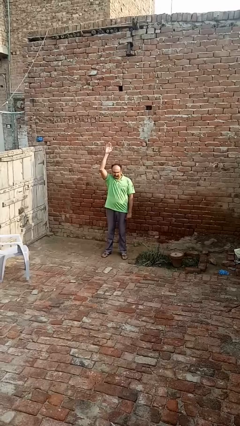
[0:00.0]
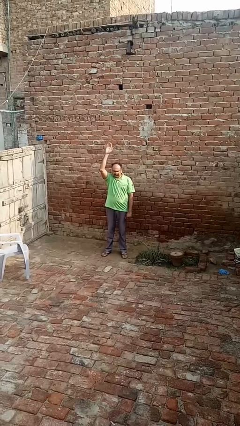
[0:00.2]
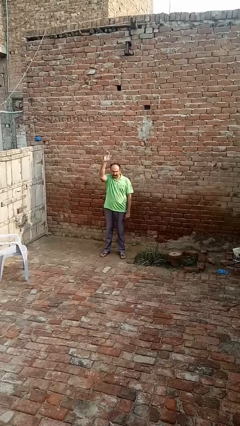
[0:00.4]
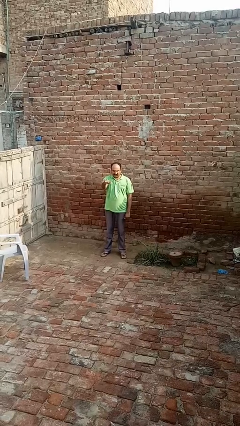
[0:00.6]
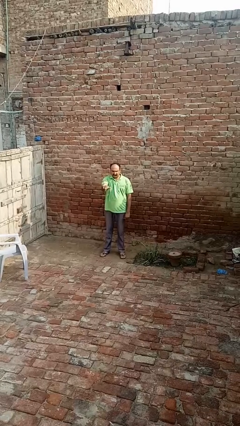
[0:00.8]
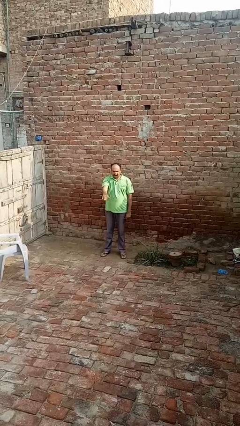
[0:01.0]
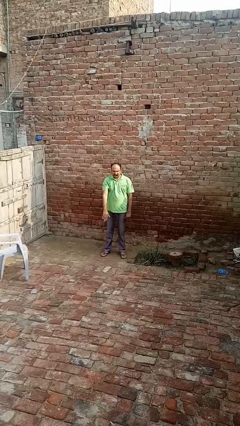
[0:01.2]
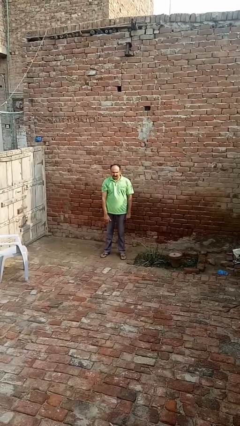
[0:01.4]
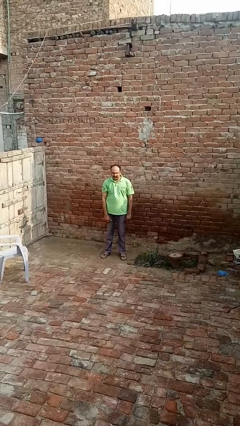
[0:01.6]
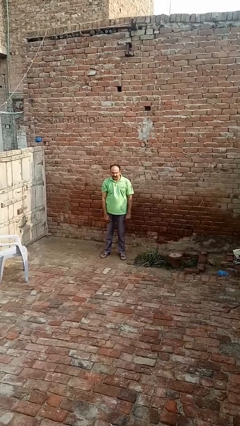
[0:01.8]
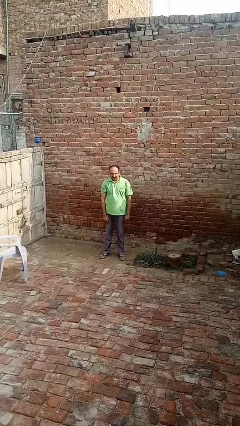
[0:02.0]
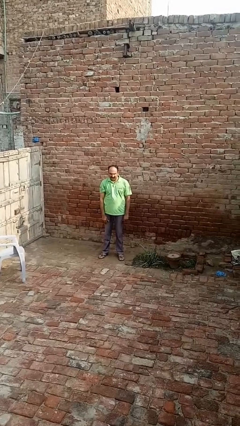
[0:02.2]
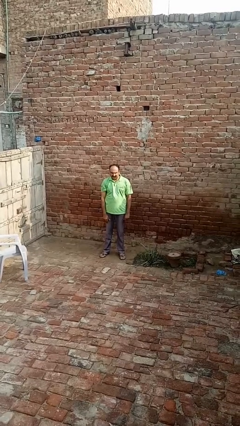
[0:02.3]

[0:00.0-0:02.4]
person gestures swipe down

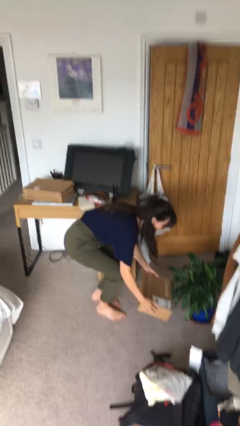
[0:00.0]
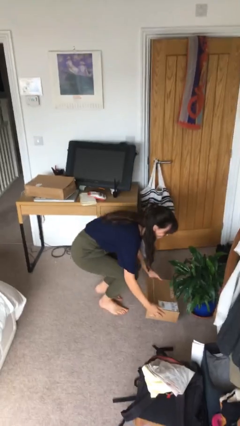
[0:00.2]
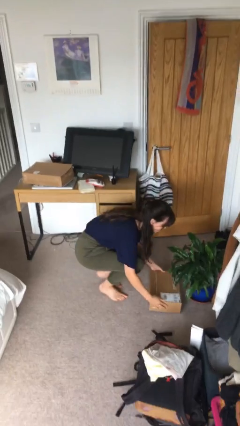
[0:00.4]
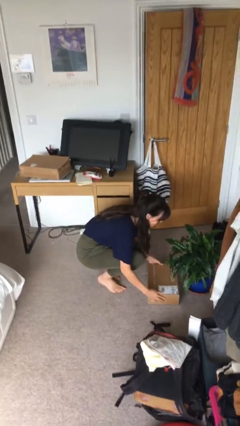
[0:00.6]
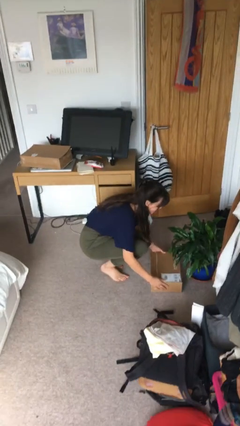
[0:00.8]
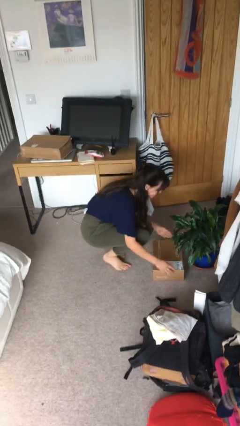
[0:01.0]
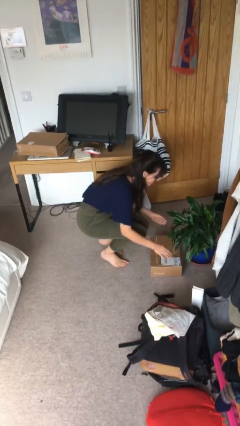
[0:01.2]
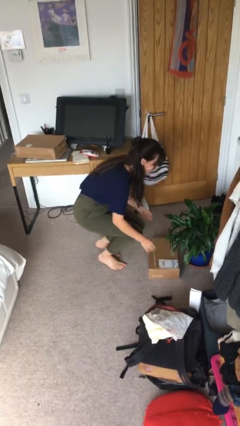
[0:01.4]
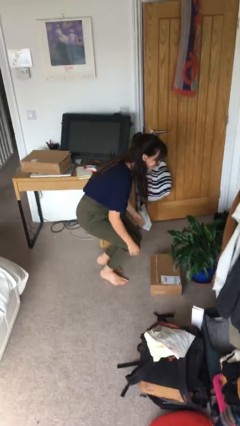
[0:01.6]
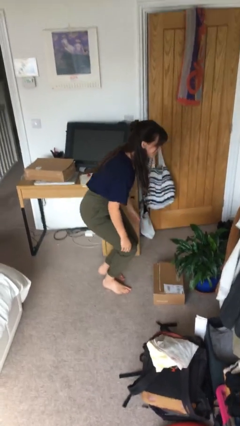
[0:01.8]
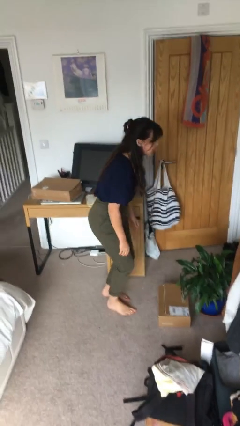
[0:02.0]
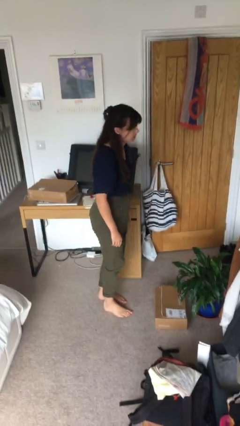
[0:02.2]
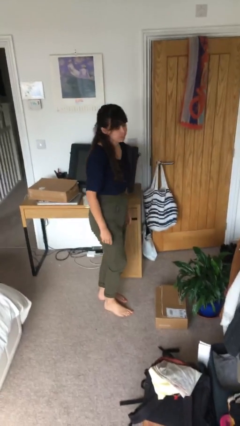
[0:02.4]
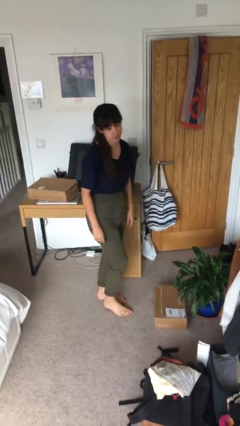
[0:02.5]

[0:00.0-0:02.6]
person puts down object on floor

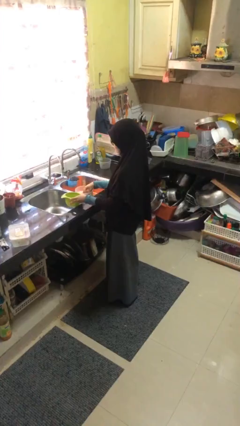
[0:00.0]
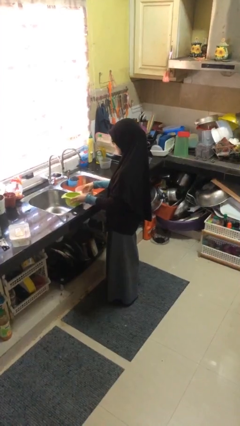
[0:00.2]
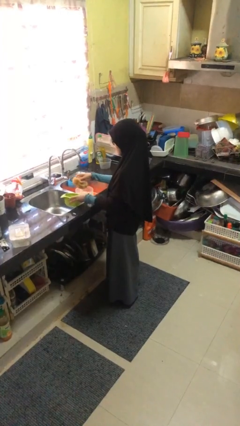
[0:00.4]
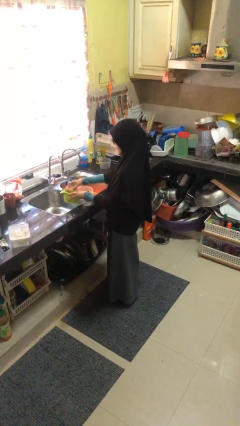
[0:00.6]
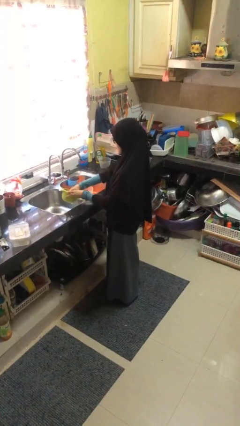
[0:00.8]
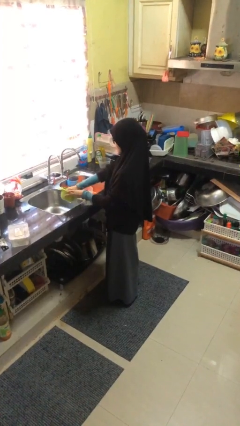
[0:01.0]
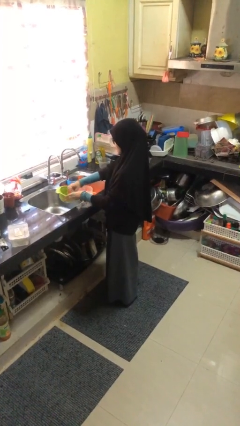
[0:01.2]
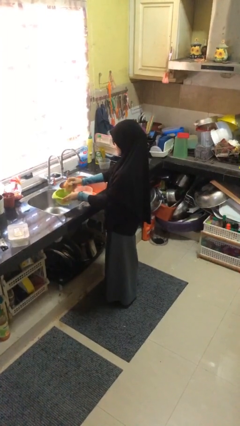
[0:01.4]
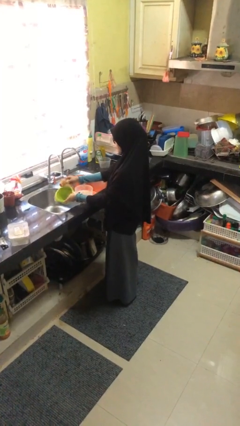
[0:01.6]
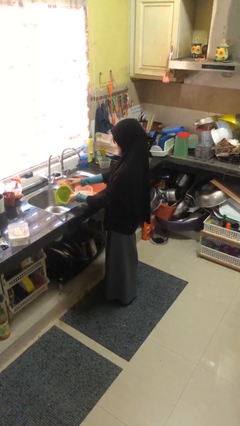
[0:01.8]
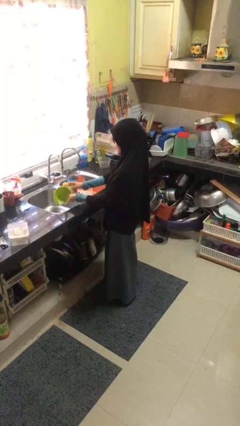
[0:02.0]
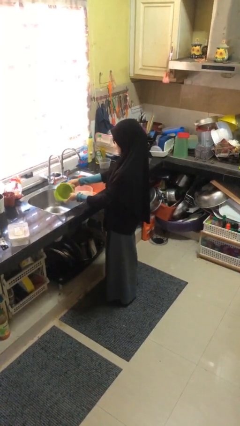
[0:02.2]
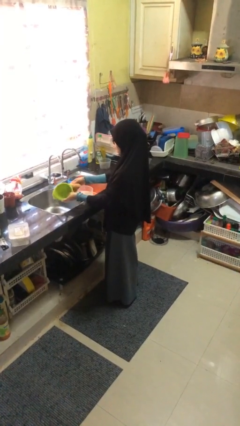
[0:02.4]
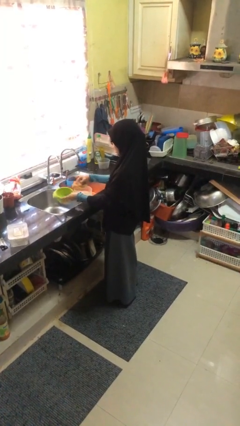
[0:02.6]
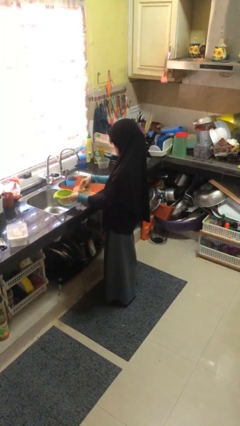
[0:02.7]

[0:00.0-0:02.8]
person washes dish

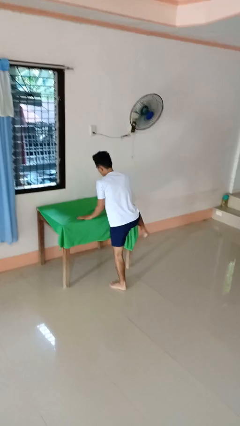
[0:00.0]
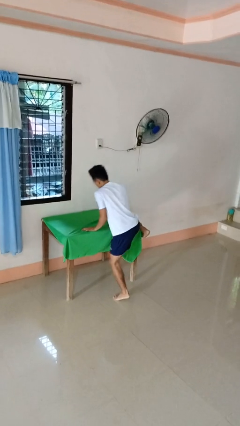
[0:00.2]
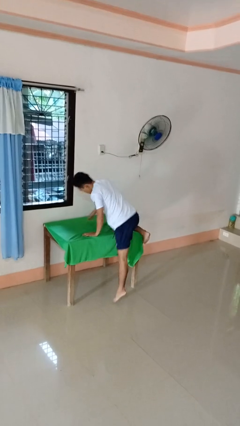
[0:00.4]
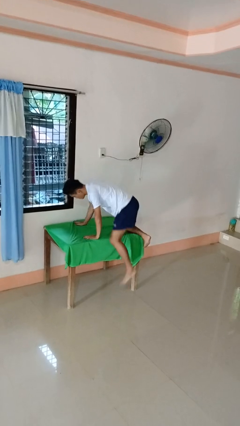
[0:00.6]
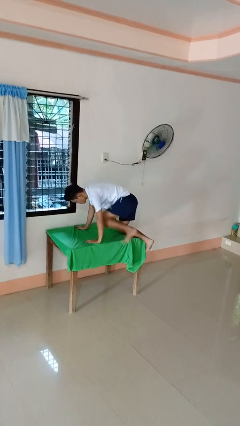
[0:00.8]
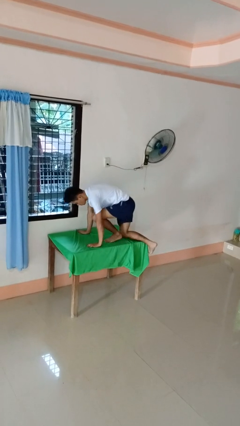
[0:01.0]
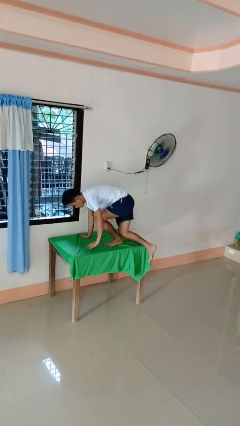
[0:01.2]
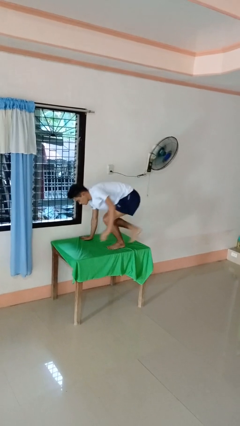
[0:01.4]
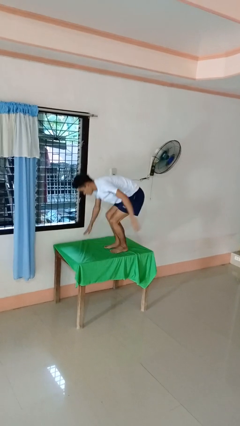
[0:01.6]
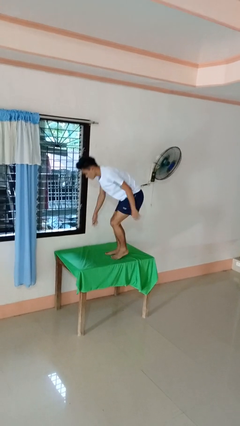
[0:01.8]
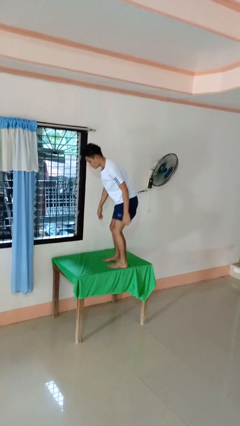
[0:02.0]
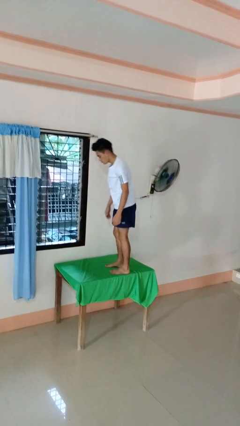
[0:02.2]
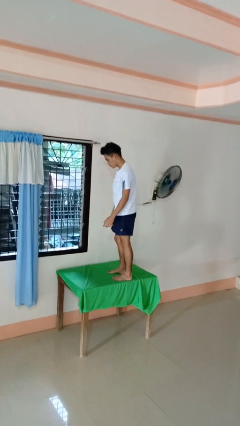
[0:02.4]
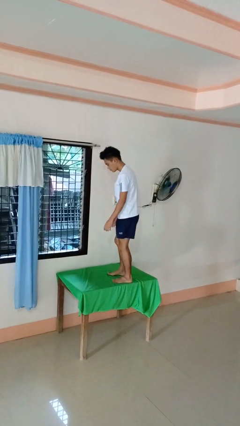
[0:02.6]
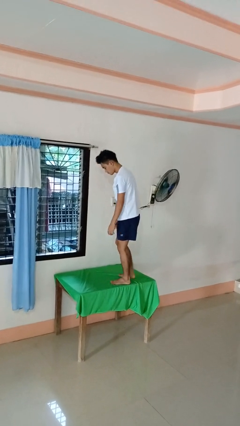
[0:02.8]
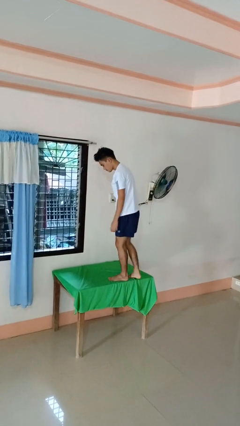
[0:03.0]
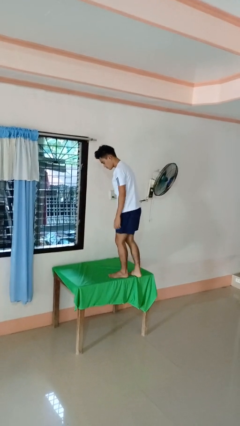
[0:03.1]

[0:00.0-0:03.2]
person climbs on table

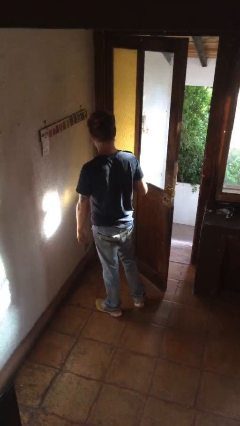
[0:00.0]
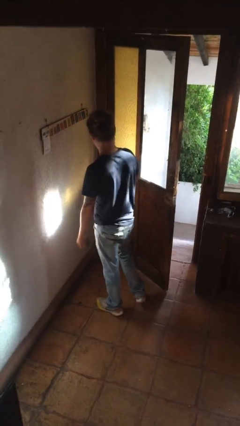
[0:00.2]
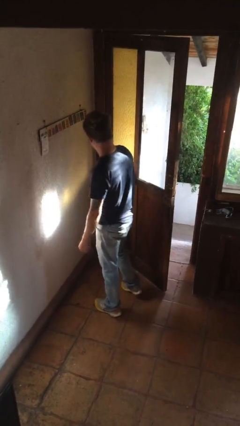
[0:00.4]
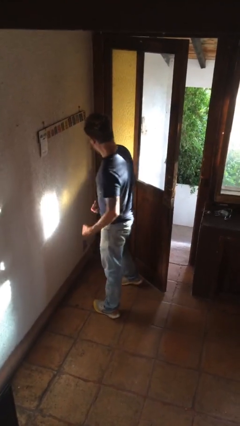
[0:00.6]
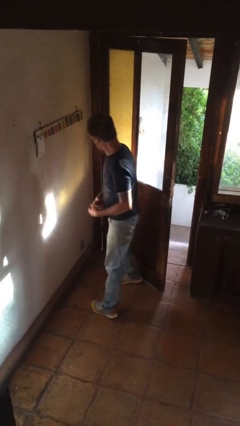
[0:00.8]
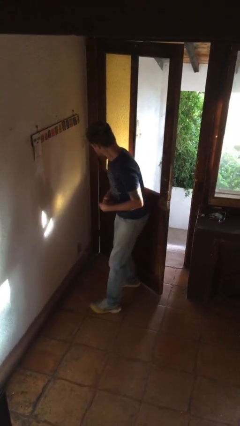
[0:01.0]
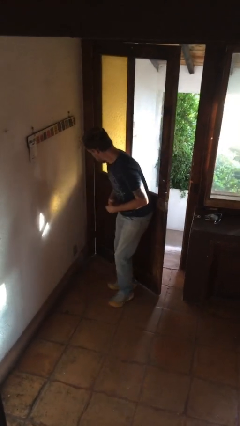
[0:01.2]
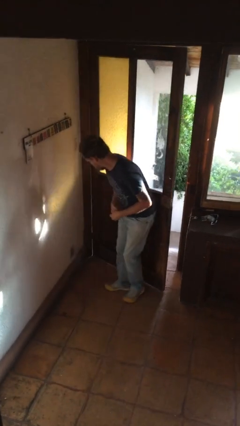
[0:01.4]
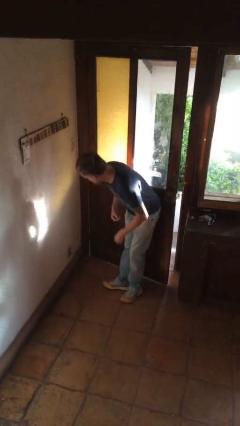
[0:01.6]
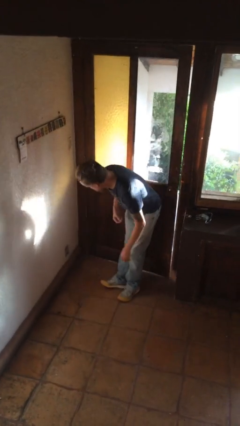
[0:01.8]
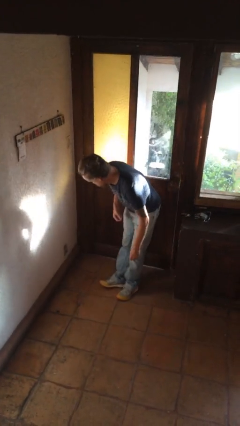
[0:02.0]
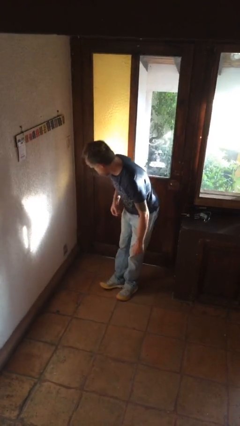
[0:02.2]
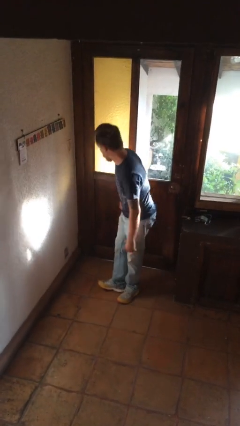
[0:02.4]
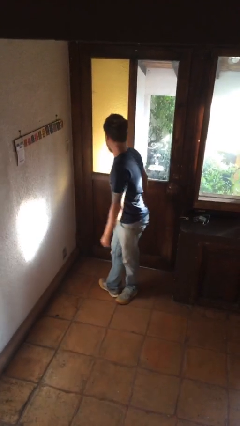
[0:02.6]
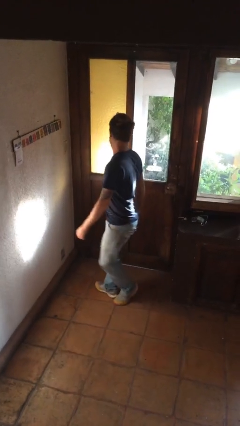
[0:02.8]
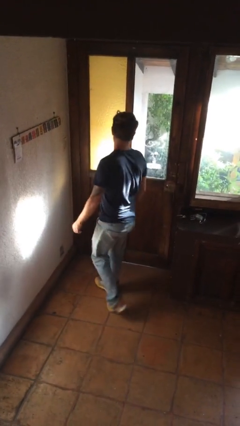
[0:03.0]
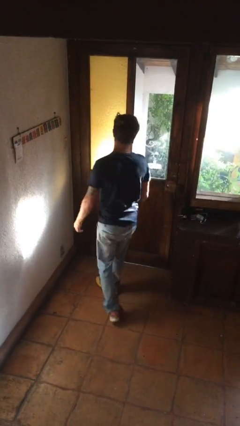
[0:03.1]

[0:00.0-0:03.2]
person closes door with hip

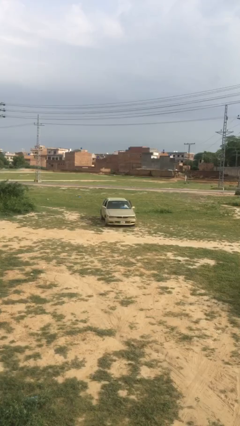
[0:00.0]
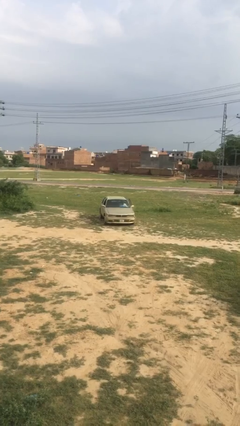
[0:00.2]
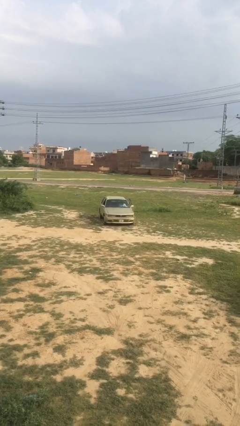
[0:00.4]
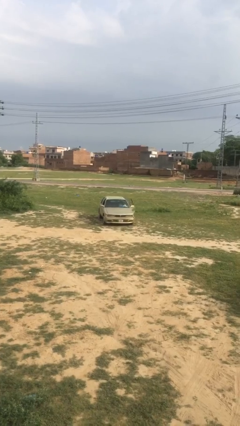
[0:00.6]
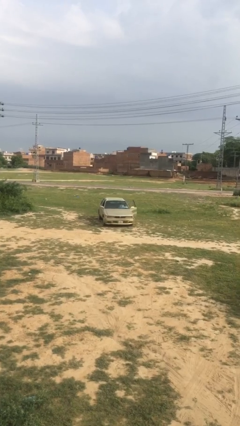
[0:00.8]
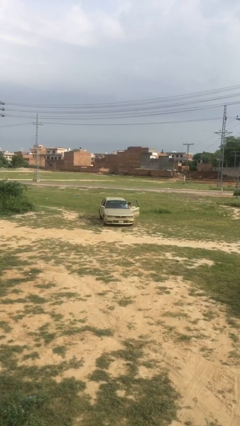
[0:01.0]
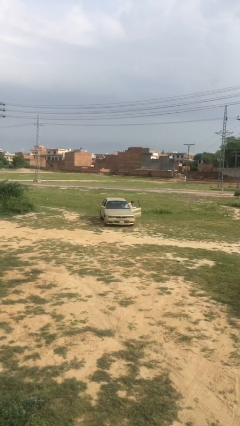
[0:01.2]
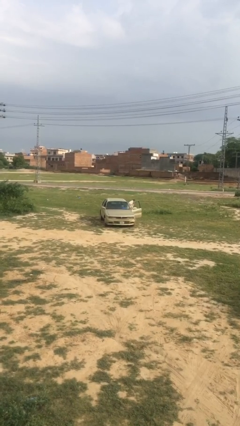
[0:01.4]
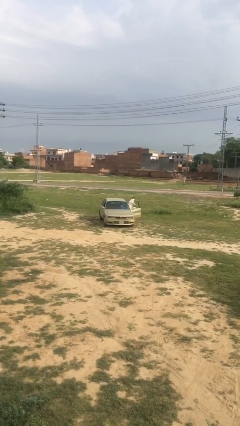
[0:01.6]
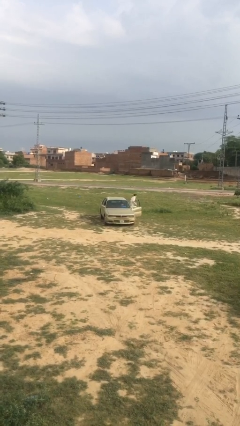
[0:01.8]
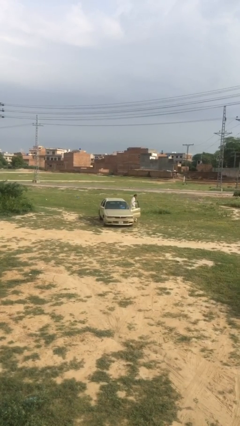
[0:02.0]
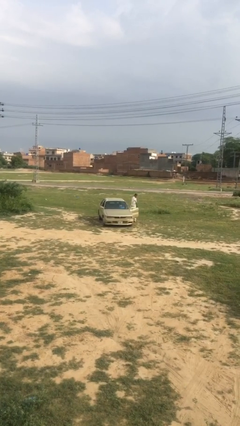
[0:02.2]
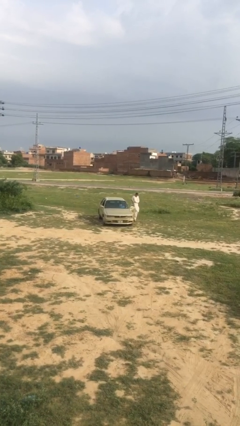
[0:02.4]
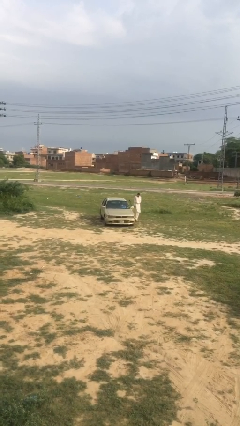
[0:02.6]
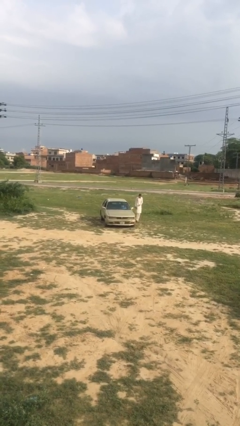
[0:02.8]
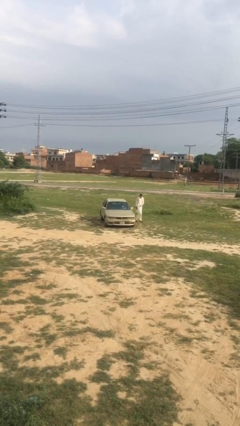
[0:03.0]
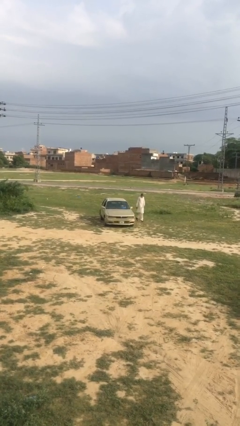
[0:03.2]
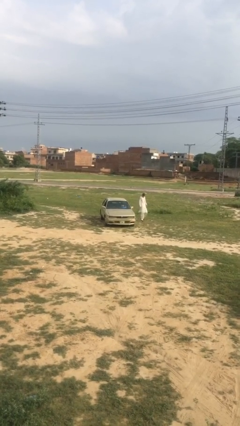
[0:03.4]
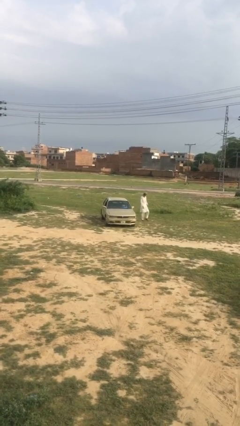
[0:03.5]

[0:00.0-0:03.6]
car drops off person
